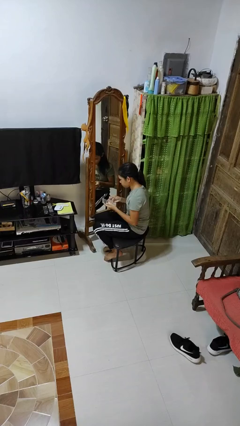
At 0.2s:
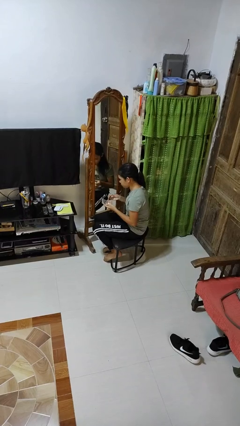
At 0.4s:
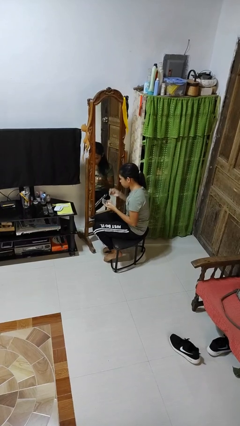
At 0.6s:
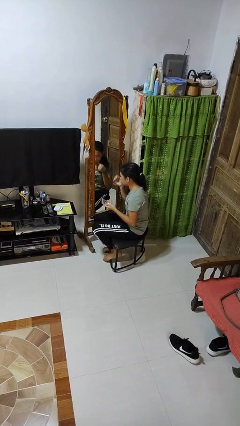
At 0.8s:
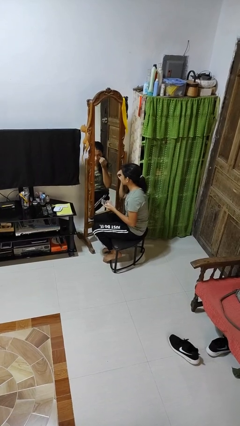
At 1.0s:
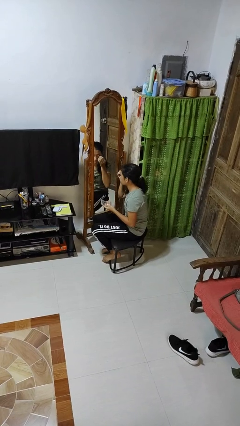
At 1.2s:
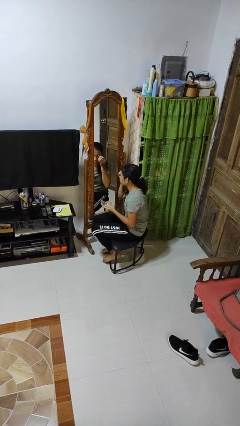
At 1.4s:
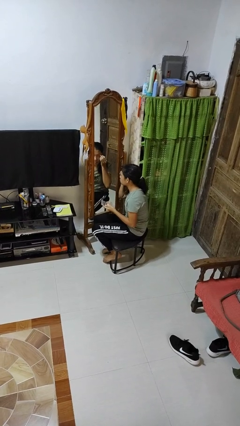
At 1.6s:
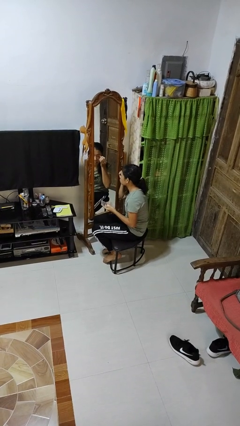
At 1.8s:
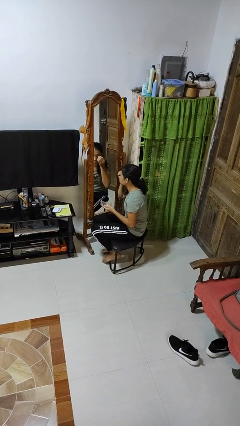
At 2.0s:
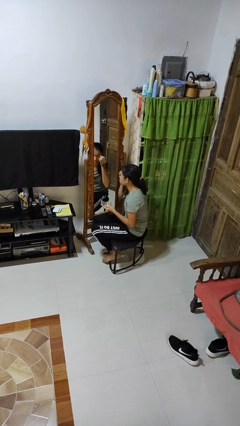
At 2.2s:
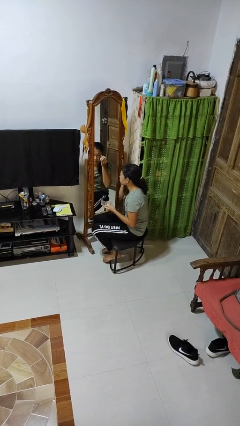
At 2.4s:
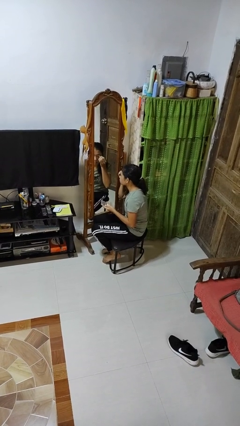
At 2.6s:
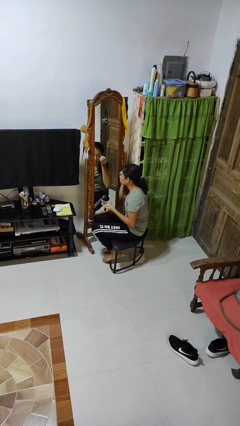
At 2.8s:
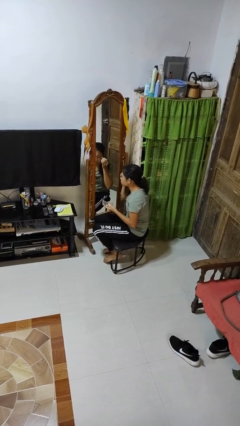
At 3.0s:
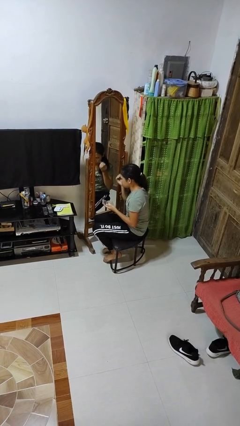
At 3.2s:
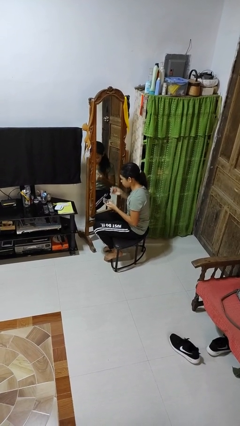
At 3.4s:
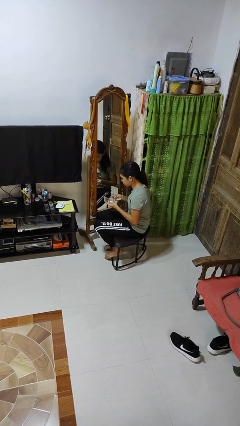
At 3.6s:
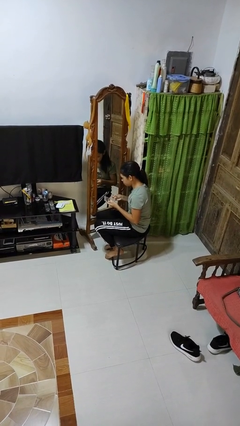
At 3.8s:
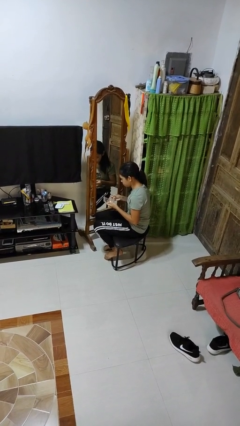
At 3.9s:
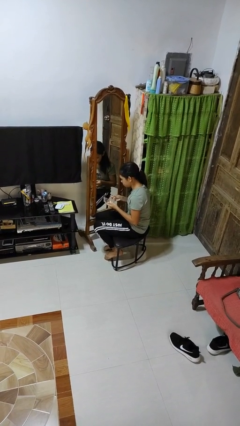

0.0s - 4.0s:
person applies eye makeup

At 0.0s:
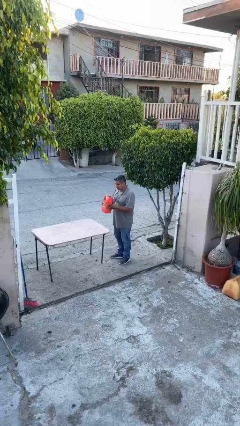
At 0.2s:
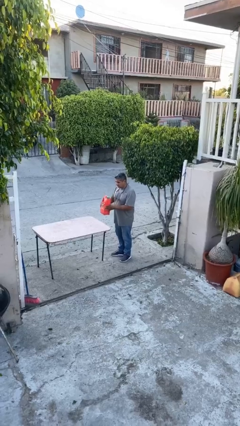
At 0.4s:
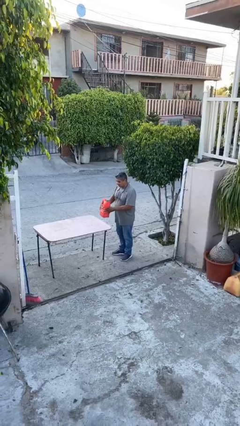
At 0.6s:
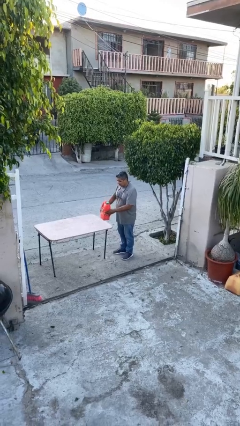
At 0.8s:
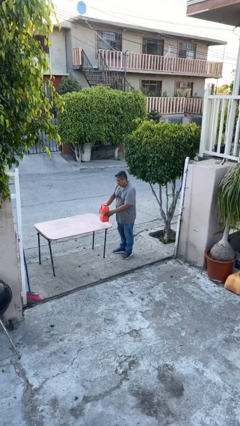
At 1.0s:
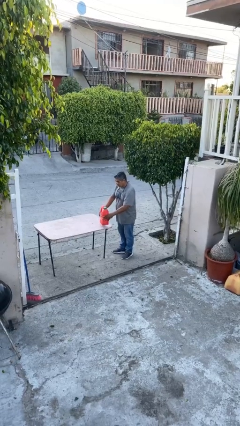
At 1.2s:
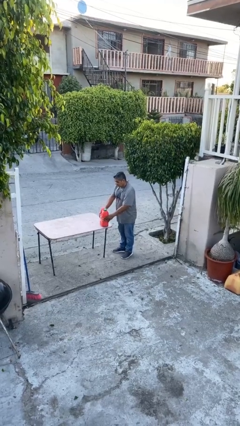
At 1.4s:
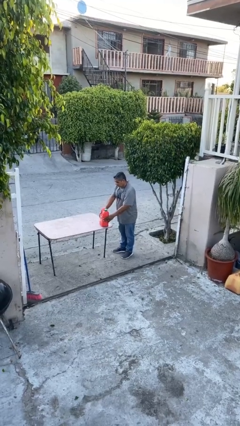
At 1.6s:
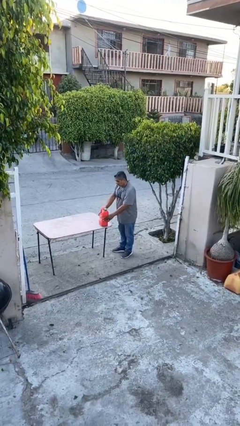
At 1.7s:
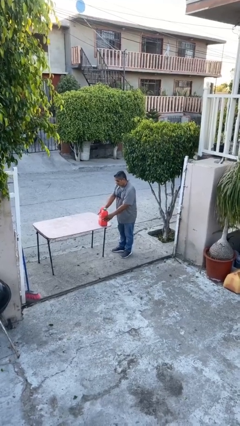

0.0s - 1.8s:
person puts down object on table

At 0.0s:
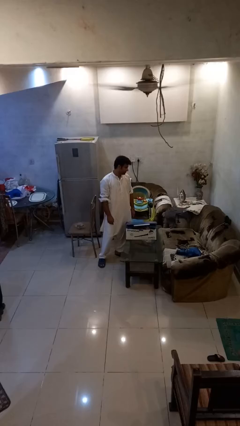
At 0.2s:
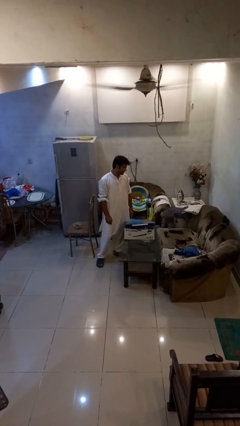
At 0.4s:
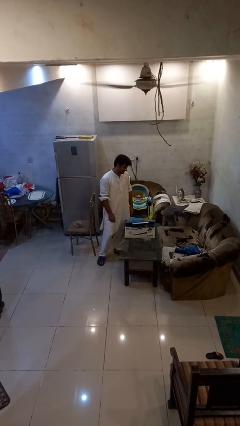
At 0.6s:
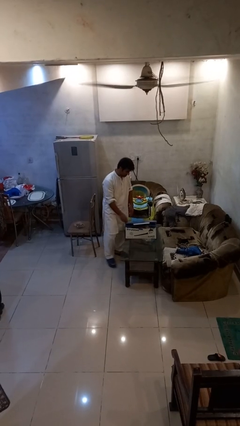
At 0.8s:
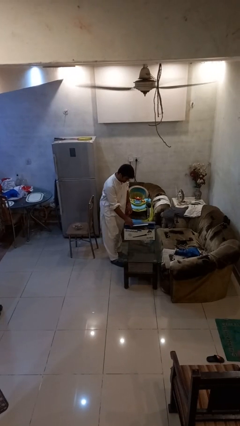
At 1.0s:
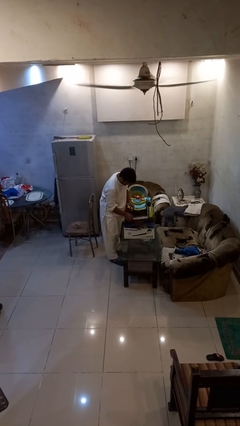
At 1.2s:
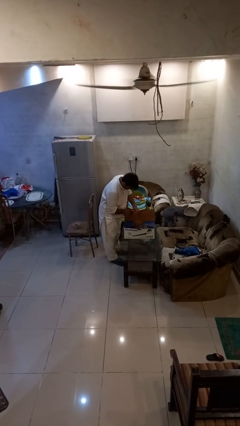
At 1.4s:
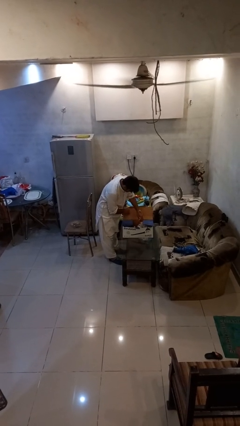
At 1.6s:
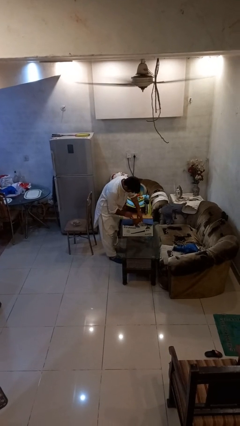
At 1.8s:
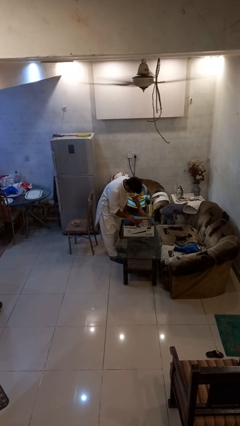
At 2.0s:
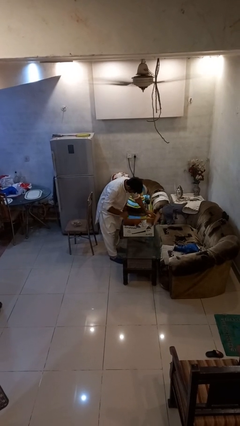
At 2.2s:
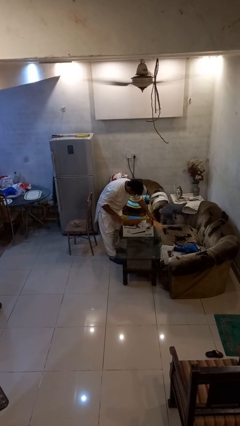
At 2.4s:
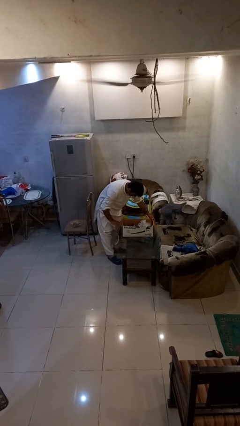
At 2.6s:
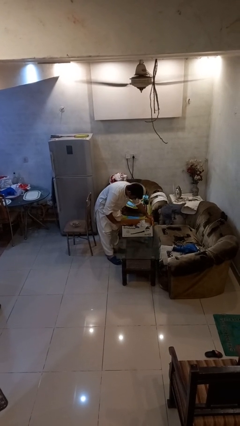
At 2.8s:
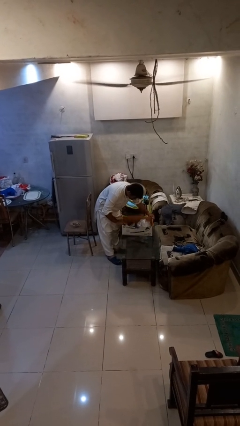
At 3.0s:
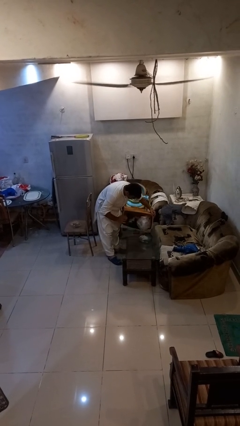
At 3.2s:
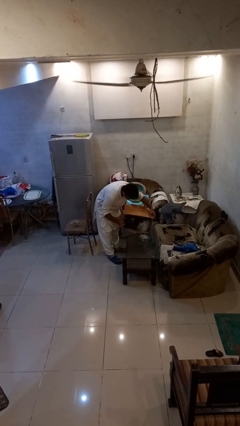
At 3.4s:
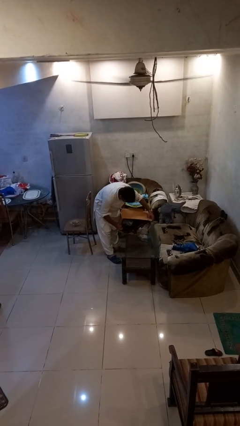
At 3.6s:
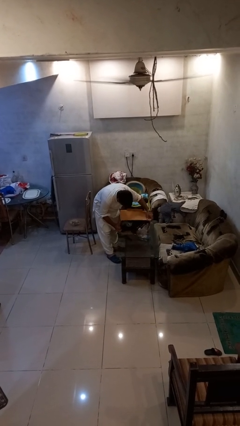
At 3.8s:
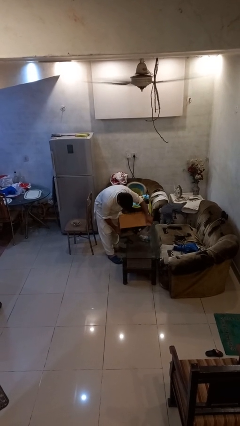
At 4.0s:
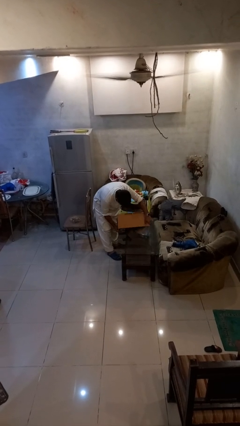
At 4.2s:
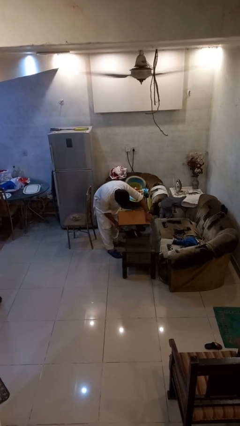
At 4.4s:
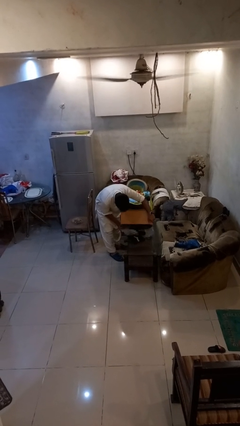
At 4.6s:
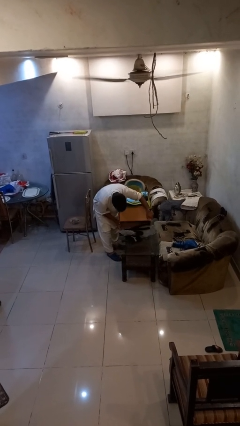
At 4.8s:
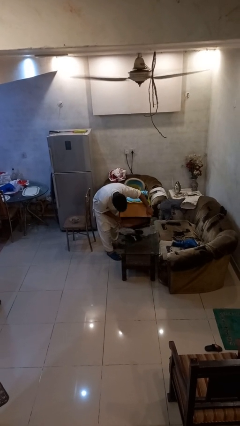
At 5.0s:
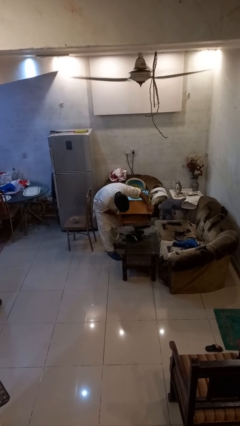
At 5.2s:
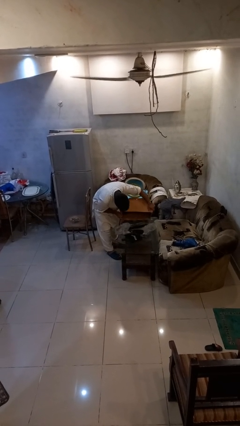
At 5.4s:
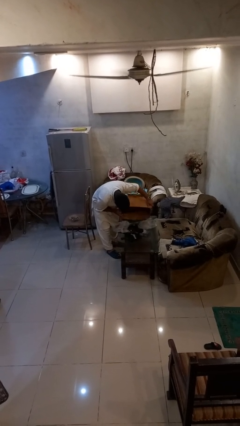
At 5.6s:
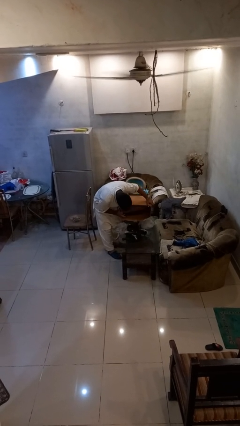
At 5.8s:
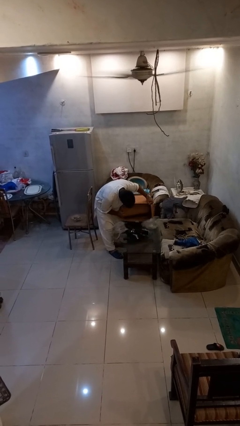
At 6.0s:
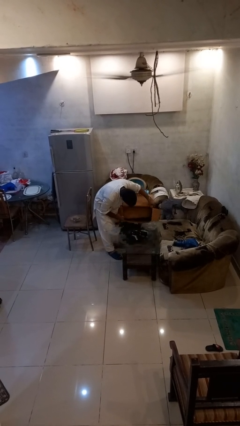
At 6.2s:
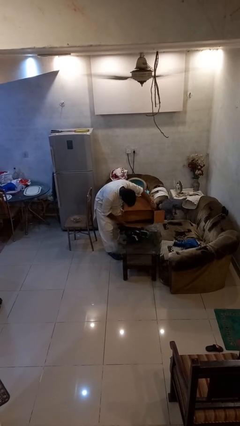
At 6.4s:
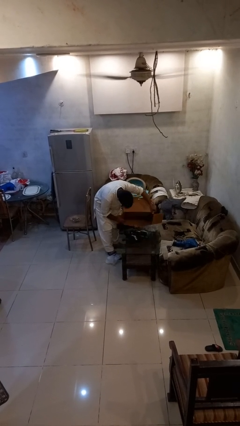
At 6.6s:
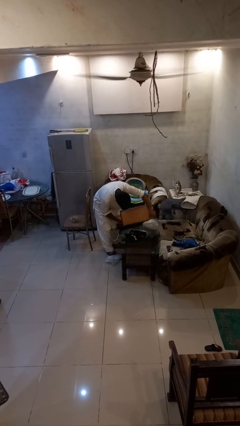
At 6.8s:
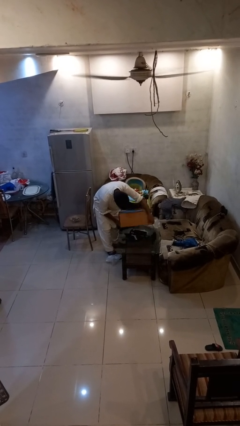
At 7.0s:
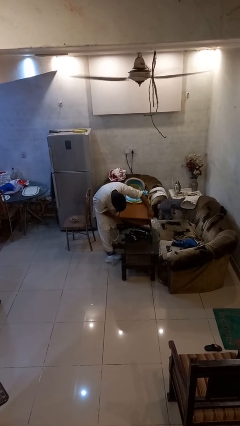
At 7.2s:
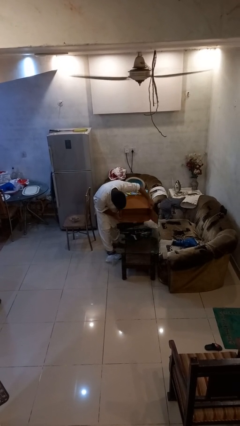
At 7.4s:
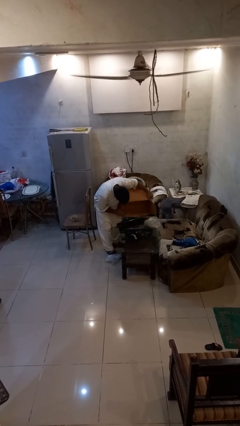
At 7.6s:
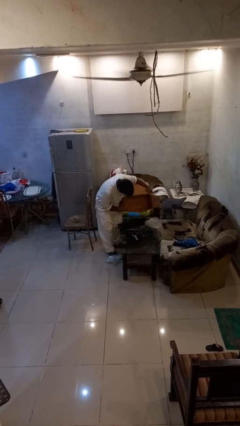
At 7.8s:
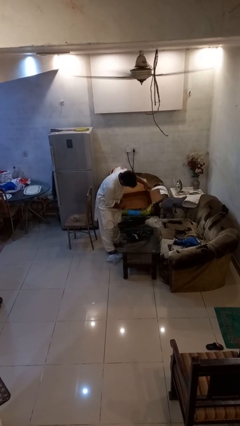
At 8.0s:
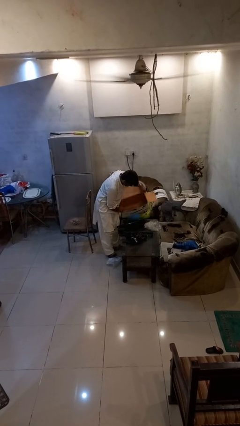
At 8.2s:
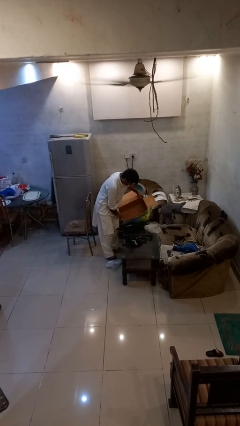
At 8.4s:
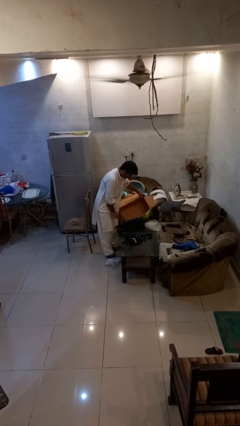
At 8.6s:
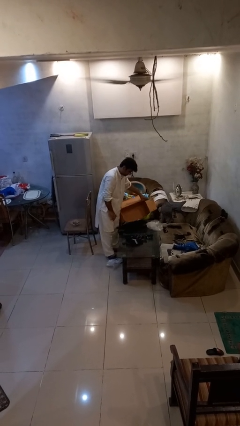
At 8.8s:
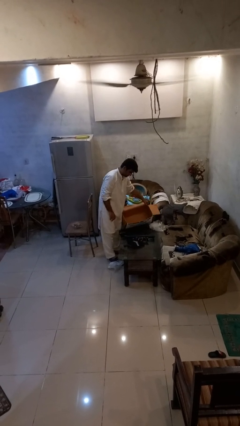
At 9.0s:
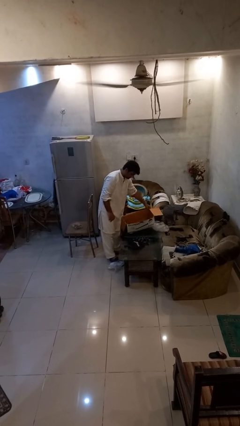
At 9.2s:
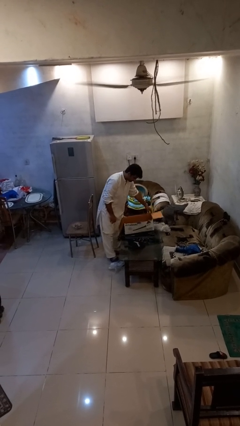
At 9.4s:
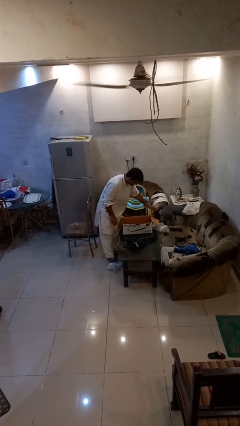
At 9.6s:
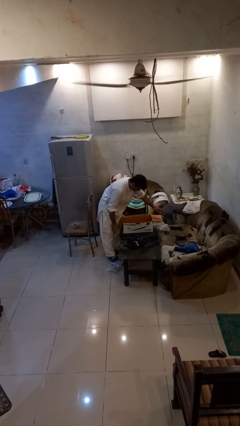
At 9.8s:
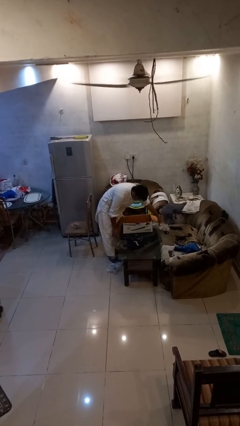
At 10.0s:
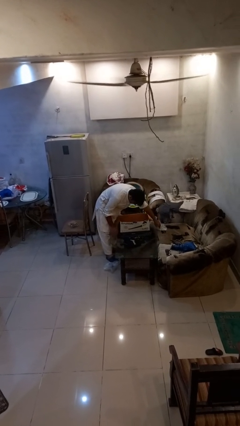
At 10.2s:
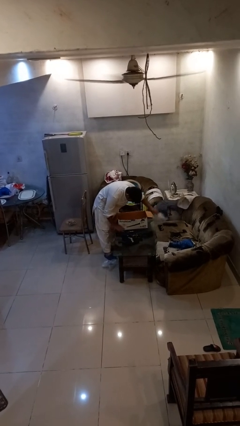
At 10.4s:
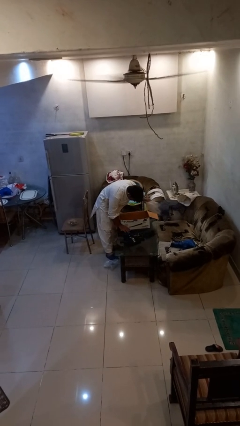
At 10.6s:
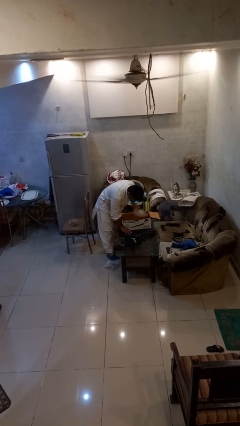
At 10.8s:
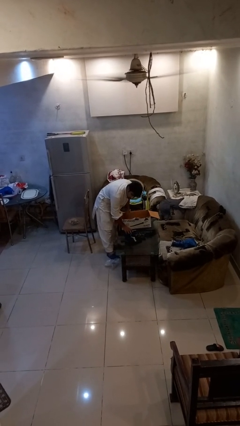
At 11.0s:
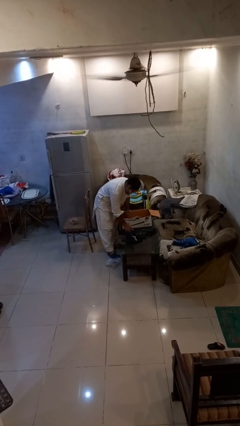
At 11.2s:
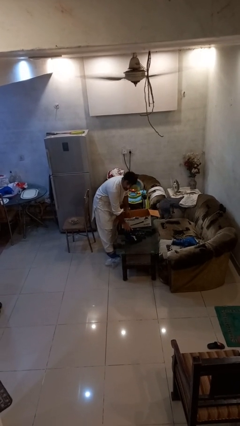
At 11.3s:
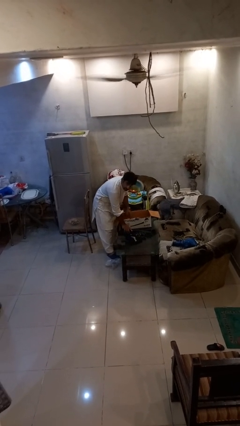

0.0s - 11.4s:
person unloads box onto table

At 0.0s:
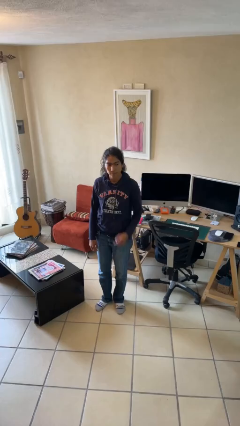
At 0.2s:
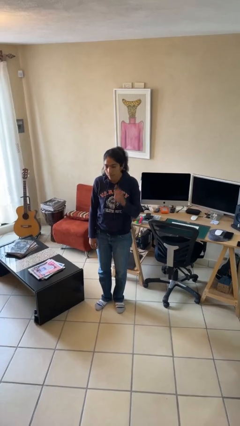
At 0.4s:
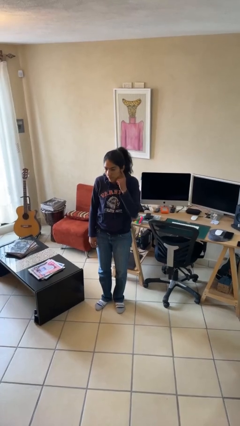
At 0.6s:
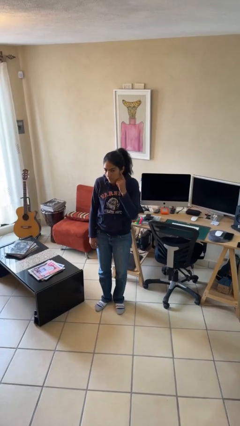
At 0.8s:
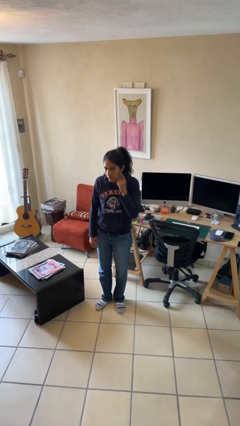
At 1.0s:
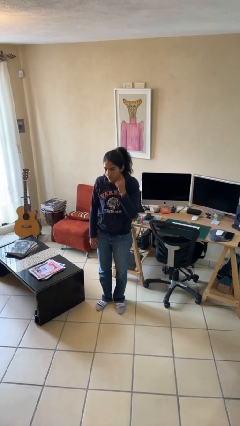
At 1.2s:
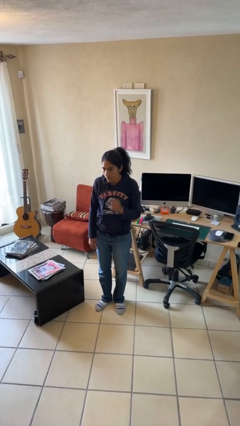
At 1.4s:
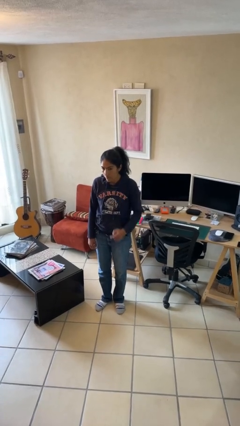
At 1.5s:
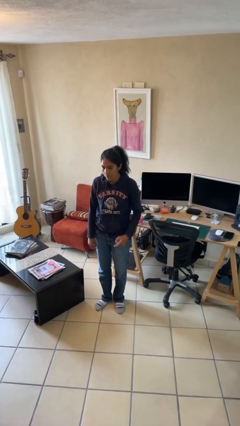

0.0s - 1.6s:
person gestures listen closely
